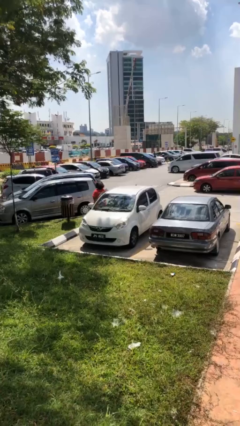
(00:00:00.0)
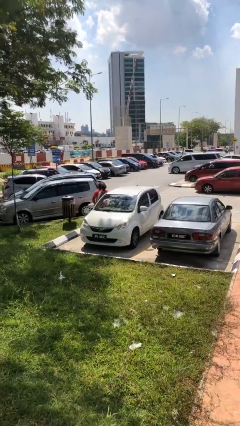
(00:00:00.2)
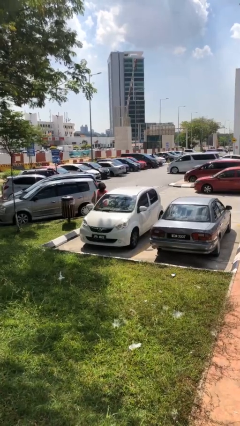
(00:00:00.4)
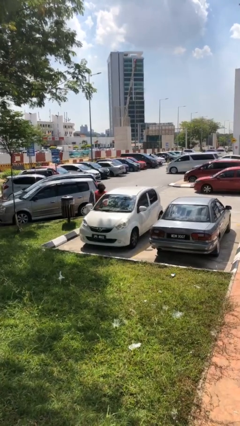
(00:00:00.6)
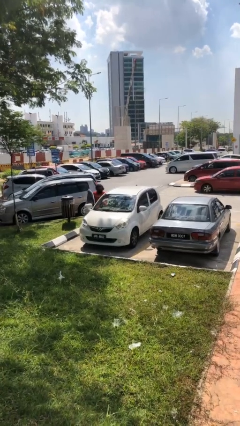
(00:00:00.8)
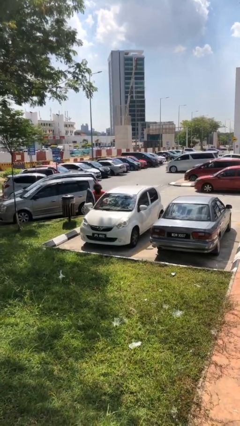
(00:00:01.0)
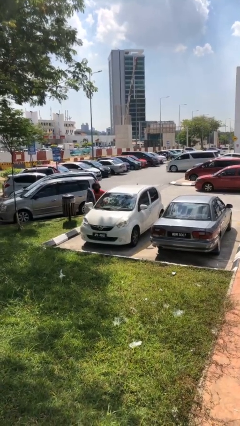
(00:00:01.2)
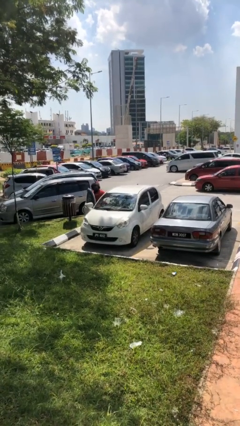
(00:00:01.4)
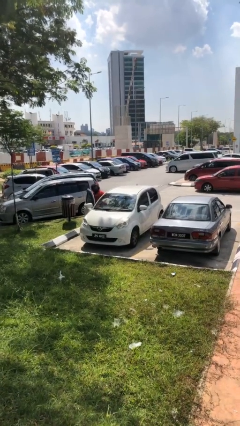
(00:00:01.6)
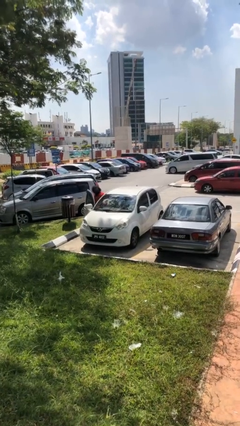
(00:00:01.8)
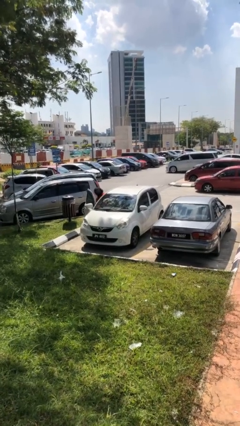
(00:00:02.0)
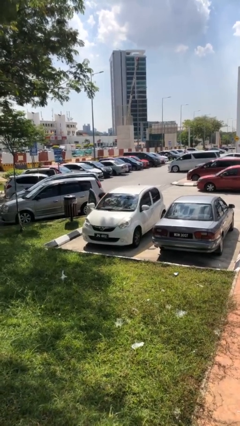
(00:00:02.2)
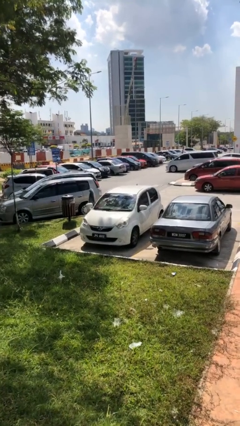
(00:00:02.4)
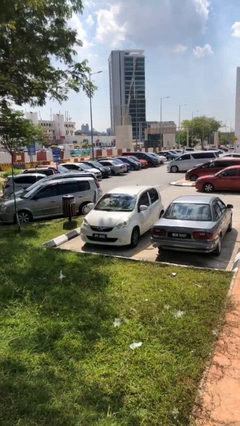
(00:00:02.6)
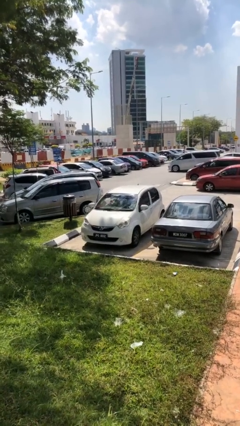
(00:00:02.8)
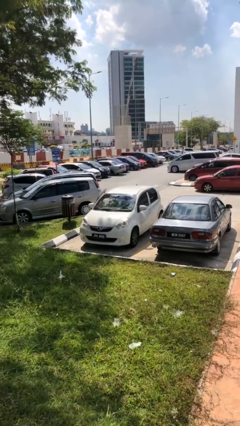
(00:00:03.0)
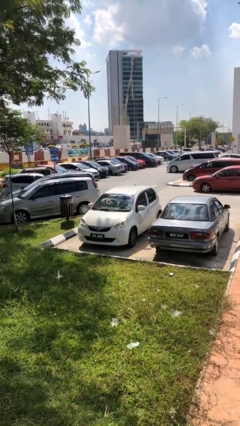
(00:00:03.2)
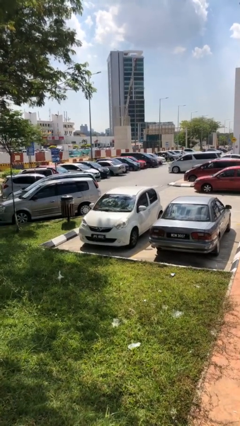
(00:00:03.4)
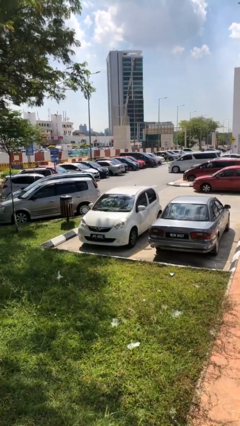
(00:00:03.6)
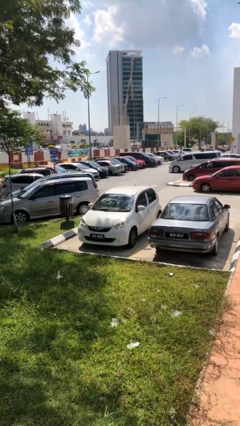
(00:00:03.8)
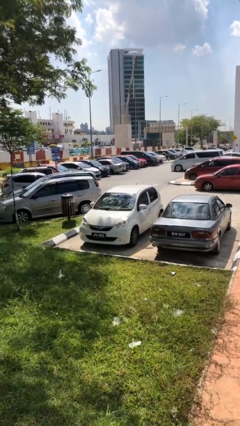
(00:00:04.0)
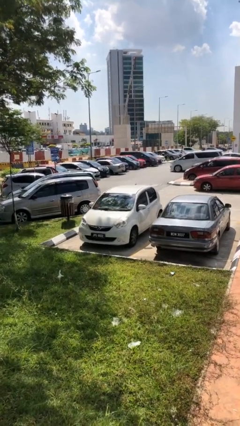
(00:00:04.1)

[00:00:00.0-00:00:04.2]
car picks up person

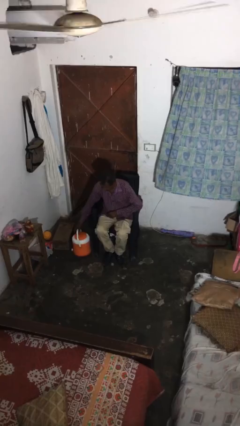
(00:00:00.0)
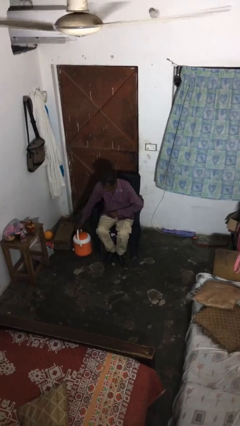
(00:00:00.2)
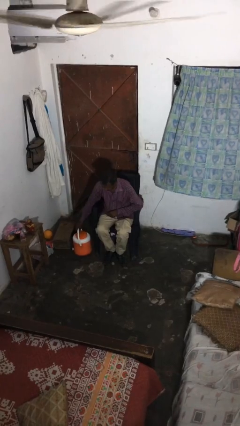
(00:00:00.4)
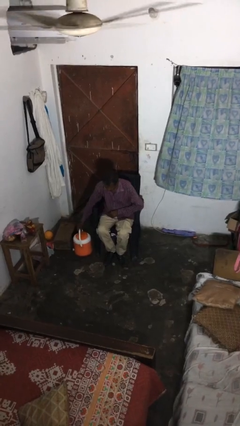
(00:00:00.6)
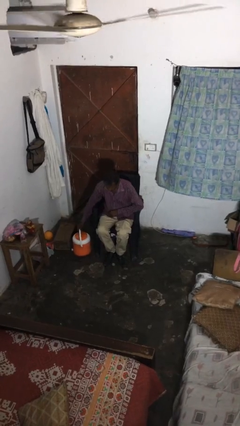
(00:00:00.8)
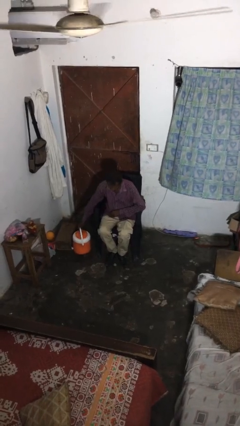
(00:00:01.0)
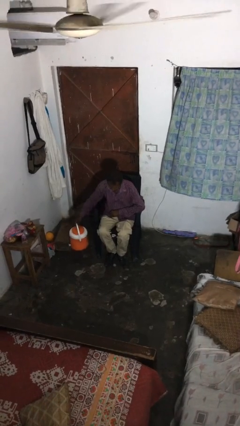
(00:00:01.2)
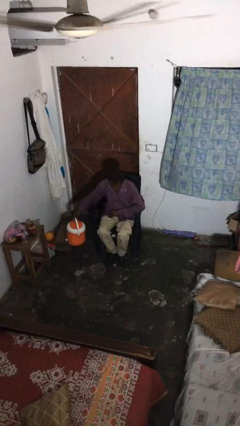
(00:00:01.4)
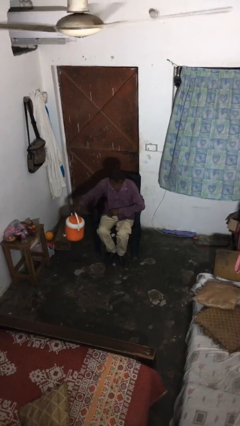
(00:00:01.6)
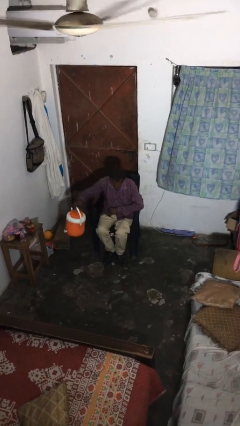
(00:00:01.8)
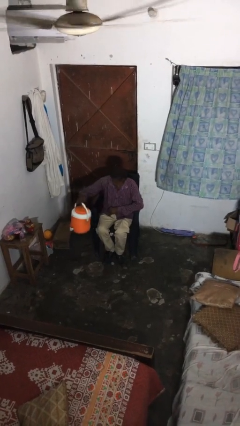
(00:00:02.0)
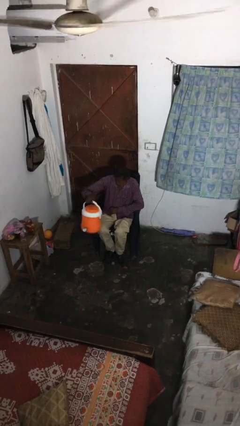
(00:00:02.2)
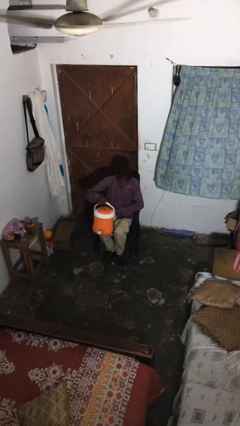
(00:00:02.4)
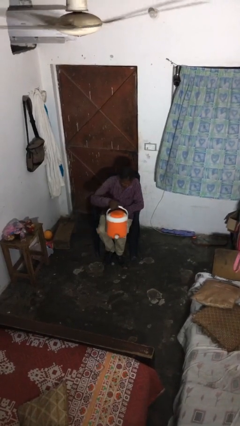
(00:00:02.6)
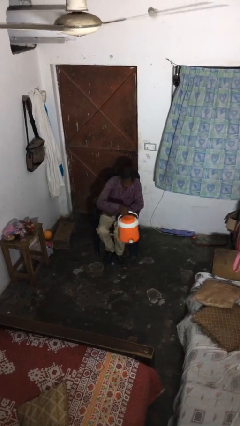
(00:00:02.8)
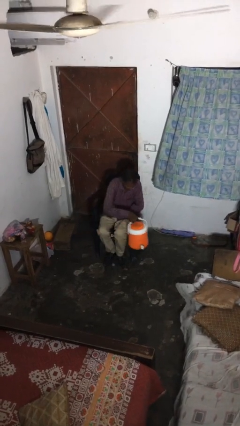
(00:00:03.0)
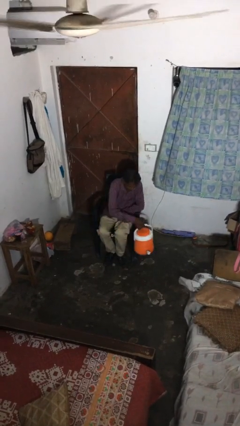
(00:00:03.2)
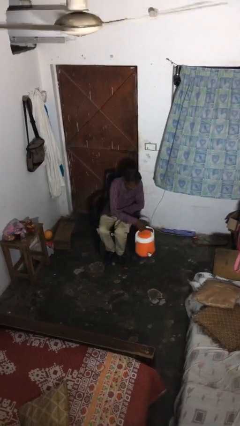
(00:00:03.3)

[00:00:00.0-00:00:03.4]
person picks up object from floor

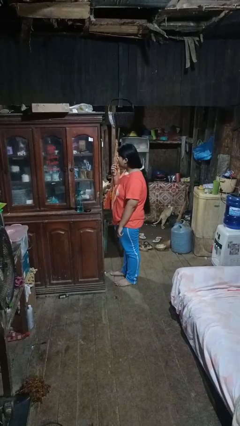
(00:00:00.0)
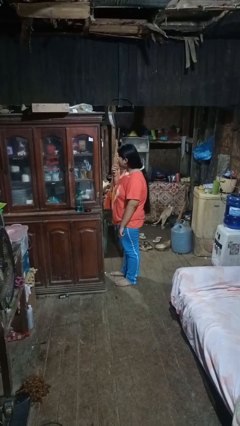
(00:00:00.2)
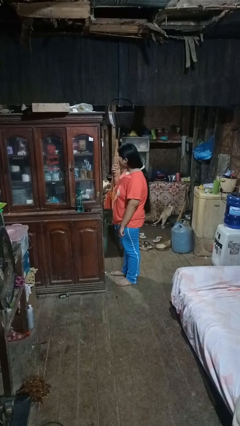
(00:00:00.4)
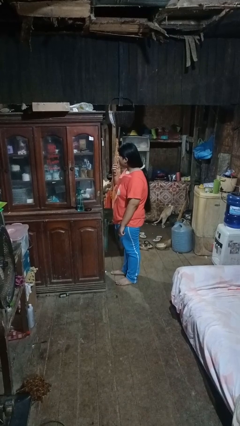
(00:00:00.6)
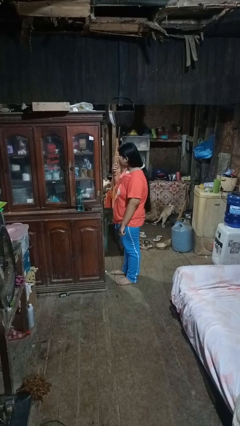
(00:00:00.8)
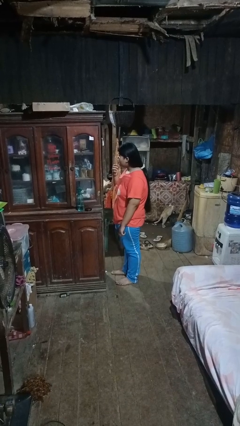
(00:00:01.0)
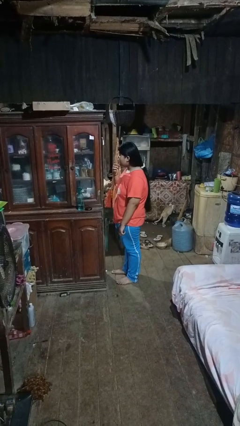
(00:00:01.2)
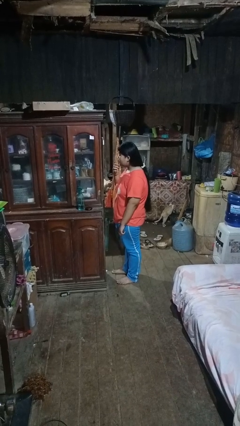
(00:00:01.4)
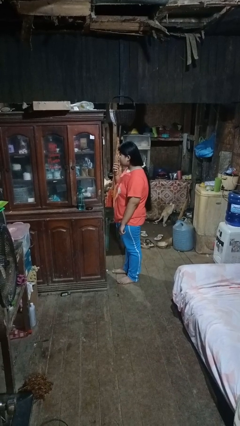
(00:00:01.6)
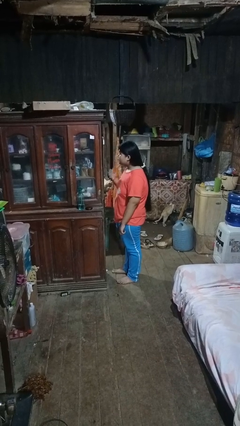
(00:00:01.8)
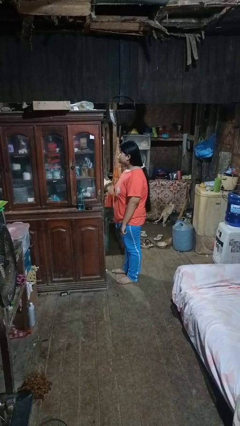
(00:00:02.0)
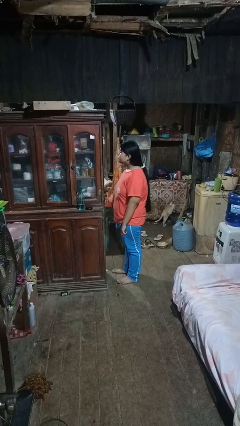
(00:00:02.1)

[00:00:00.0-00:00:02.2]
person applies lip makeup

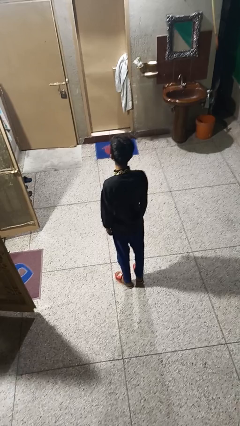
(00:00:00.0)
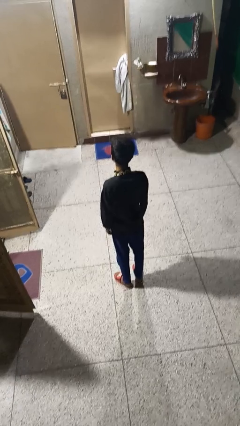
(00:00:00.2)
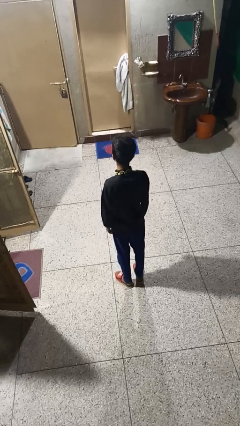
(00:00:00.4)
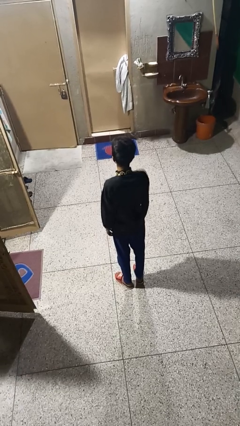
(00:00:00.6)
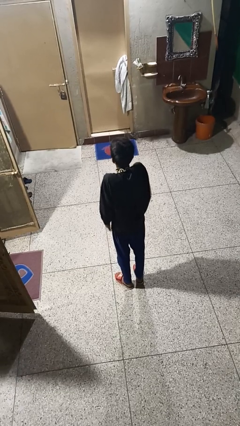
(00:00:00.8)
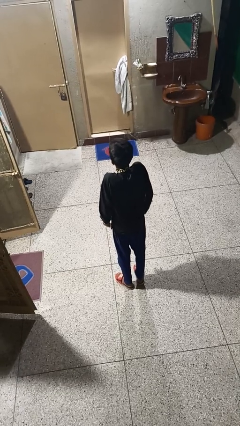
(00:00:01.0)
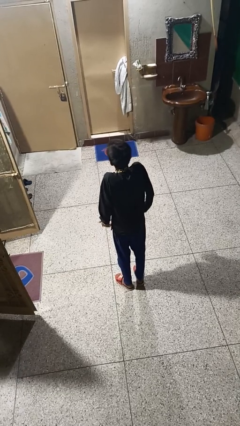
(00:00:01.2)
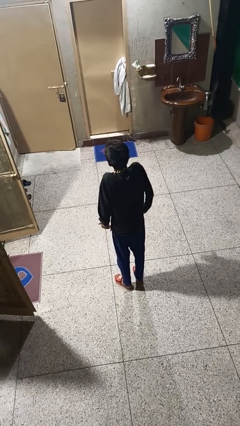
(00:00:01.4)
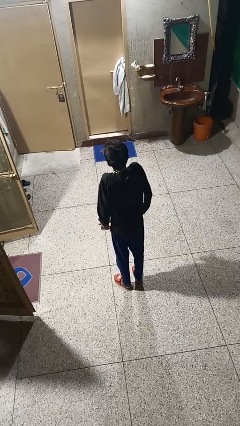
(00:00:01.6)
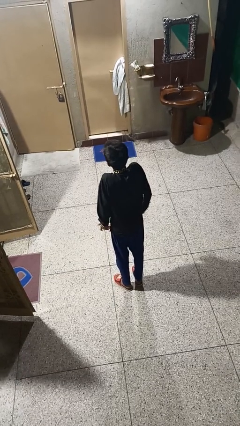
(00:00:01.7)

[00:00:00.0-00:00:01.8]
person shrugs

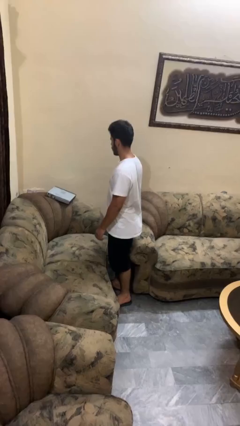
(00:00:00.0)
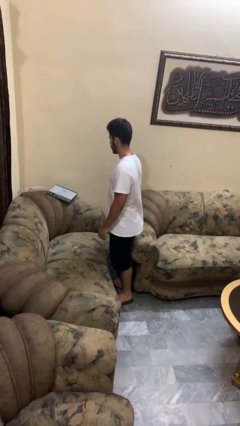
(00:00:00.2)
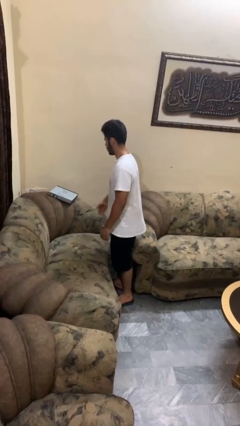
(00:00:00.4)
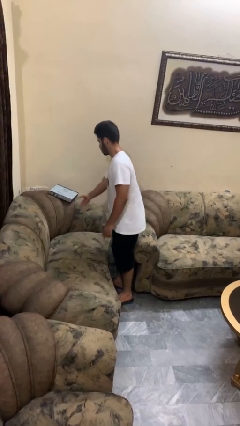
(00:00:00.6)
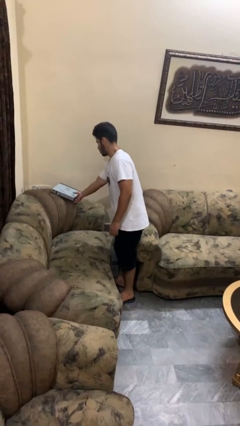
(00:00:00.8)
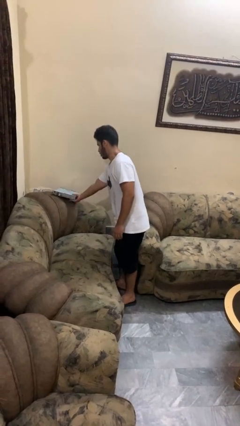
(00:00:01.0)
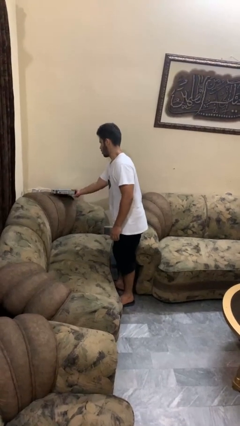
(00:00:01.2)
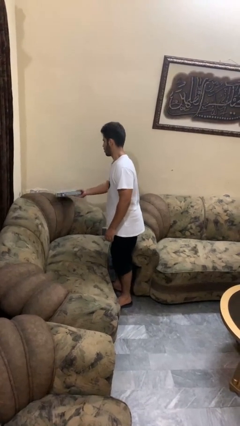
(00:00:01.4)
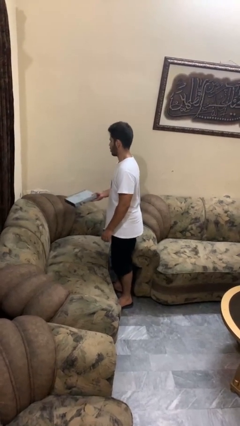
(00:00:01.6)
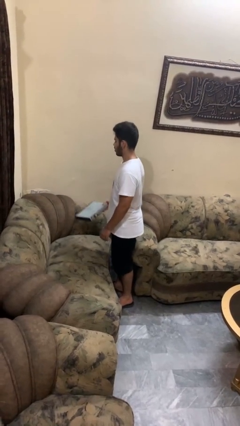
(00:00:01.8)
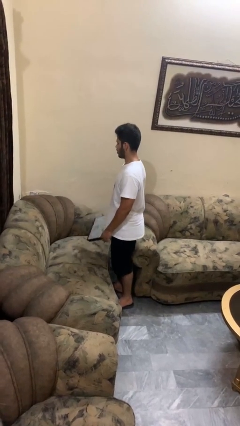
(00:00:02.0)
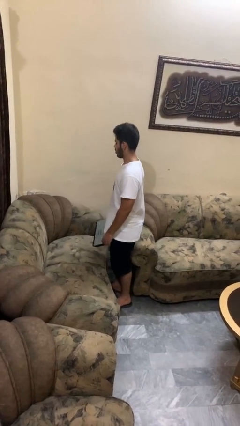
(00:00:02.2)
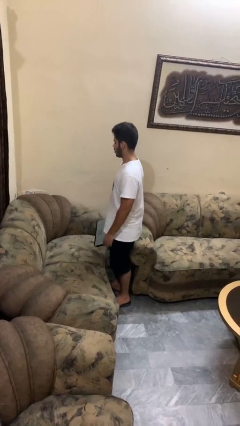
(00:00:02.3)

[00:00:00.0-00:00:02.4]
person picks up object from couch

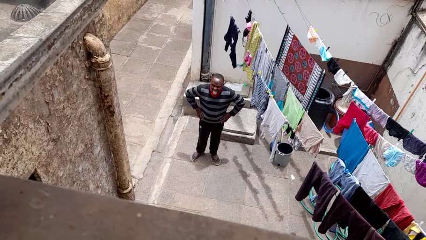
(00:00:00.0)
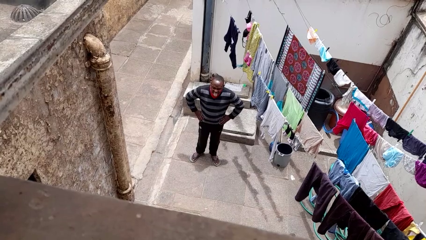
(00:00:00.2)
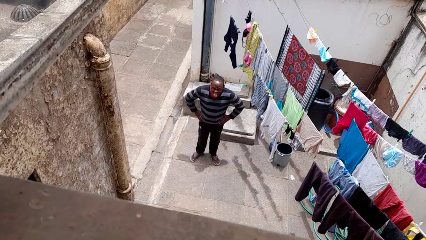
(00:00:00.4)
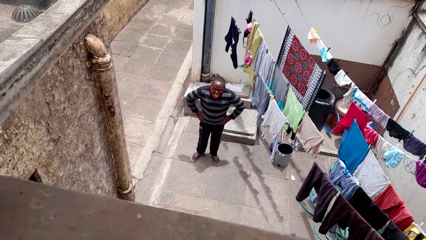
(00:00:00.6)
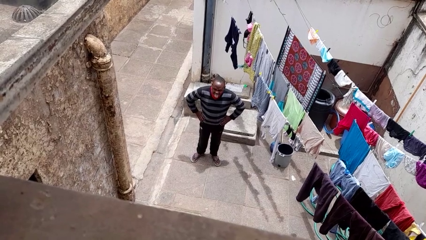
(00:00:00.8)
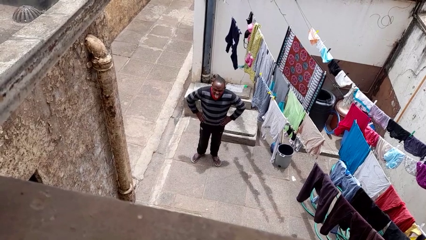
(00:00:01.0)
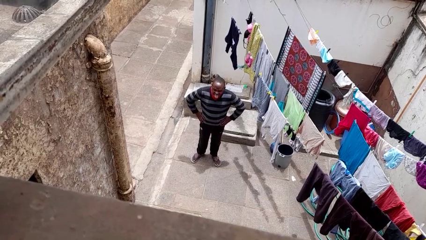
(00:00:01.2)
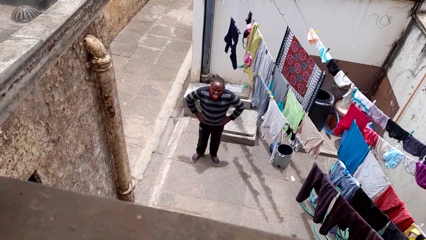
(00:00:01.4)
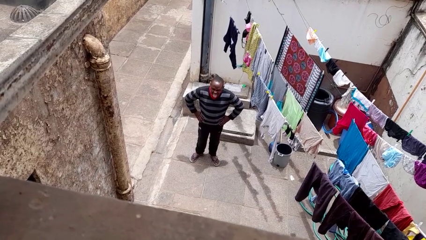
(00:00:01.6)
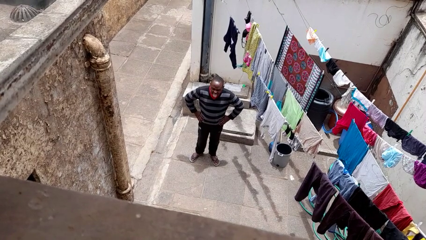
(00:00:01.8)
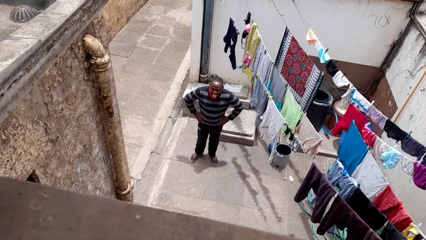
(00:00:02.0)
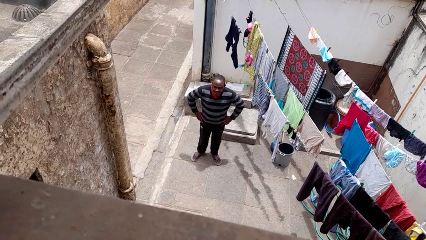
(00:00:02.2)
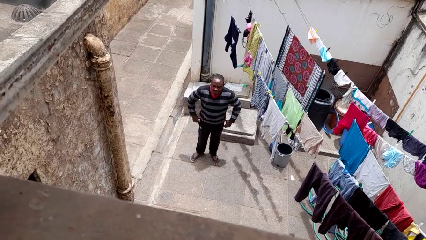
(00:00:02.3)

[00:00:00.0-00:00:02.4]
person sticks out tongue

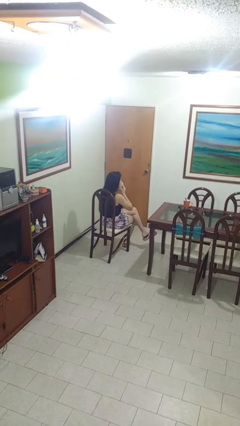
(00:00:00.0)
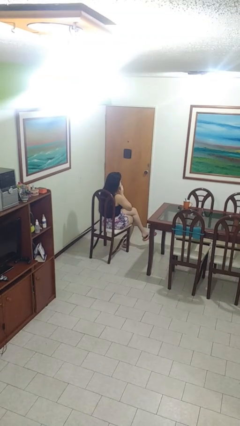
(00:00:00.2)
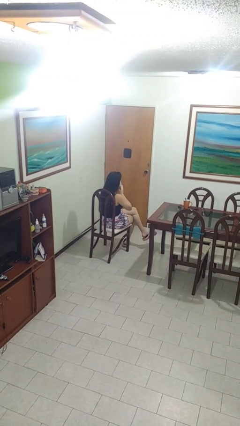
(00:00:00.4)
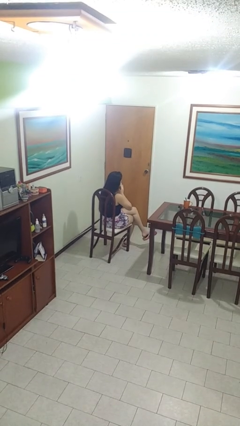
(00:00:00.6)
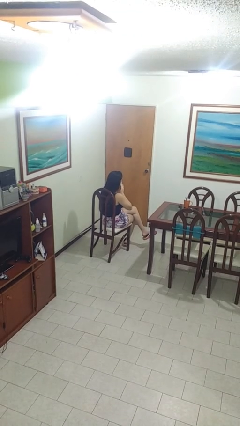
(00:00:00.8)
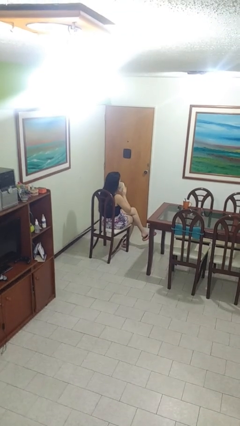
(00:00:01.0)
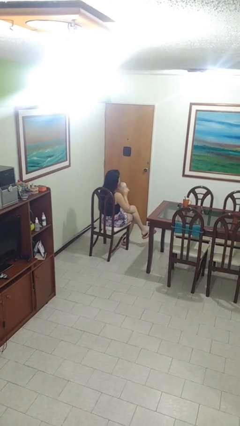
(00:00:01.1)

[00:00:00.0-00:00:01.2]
person blows nose
